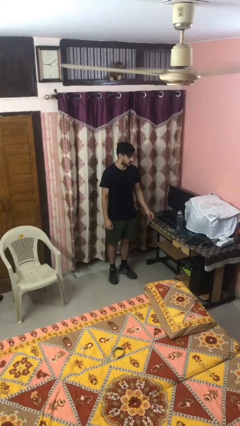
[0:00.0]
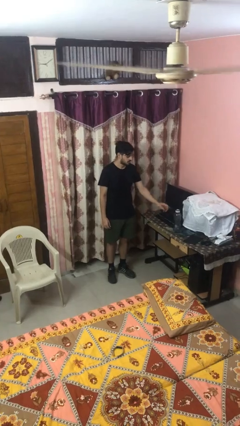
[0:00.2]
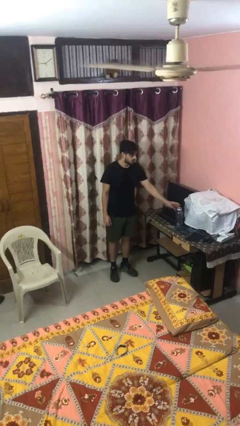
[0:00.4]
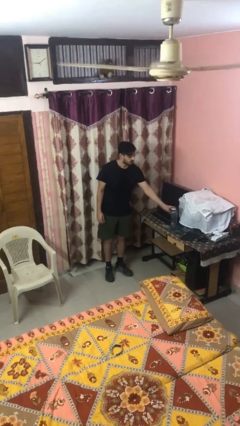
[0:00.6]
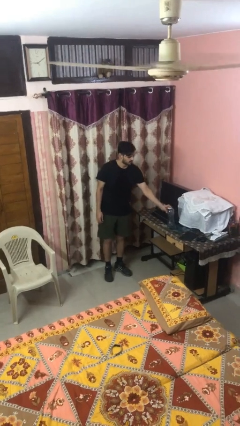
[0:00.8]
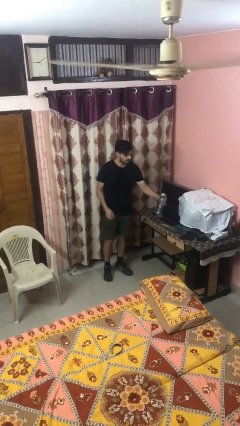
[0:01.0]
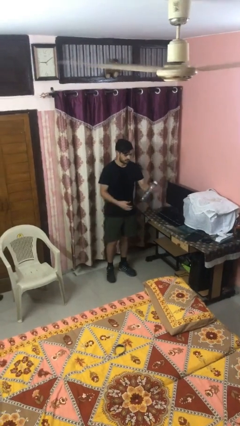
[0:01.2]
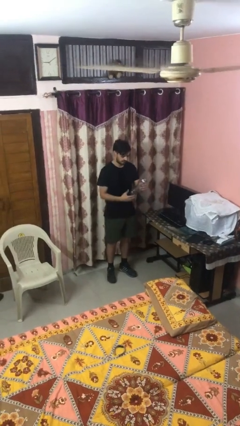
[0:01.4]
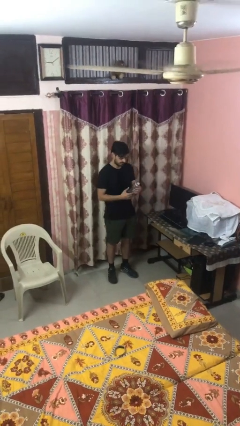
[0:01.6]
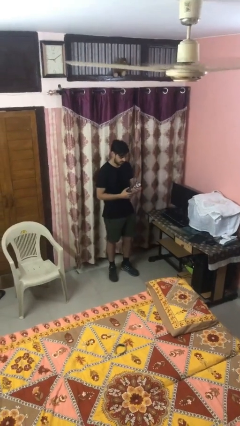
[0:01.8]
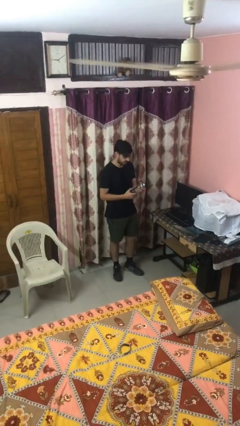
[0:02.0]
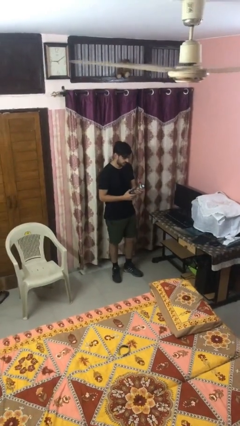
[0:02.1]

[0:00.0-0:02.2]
person picks up object from countertop

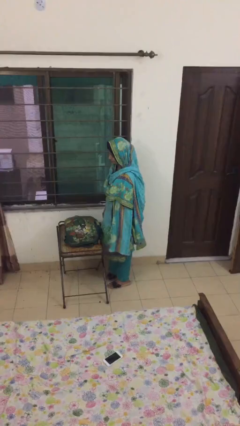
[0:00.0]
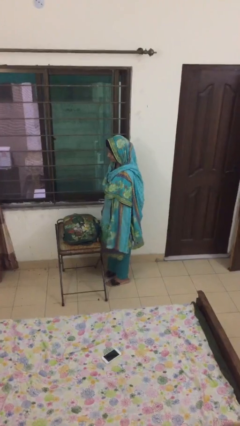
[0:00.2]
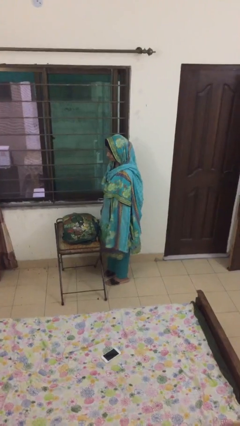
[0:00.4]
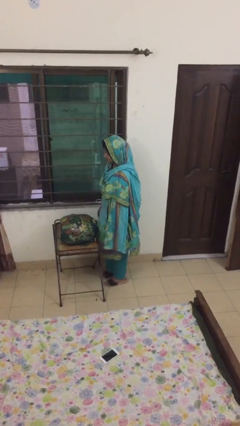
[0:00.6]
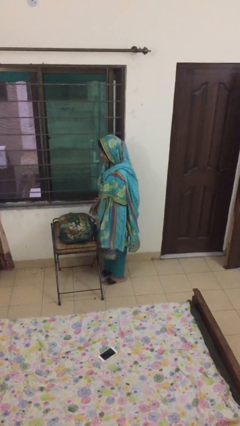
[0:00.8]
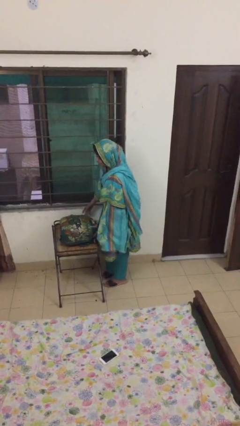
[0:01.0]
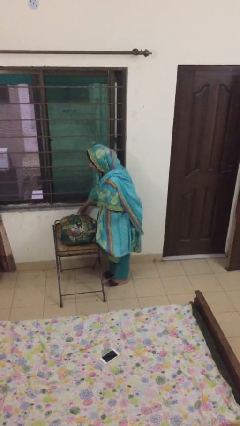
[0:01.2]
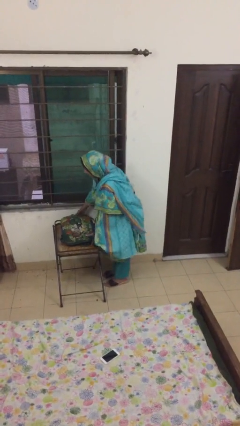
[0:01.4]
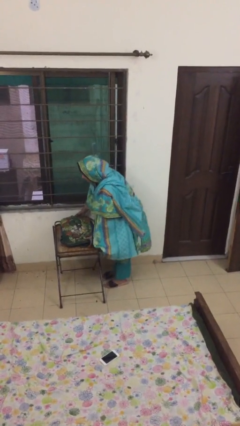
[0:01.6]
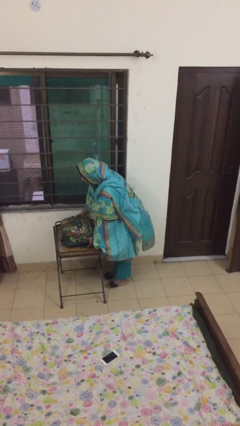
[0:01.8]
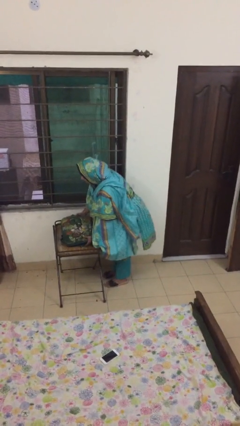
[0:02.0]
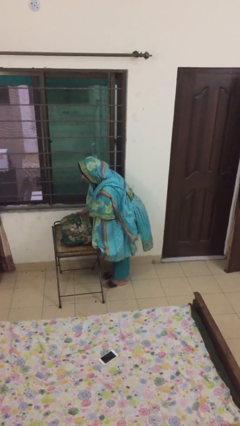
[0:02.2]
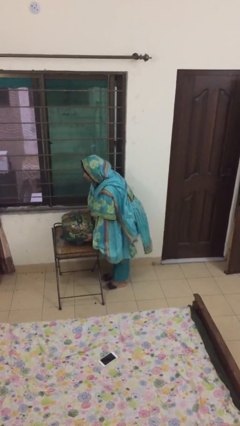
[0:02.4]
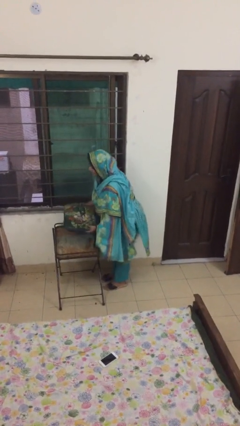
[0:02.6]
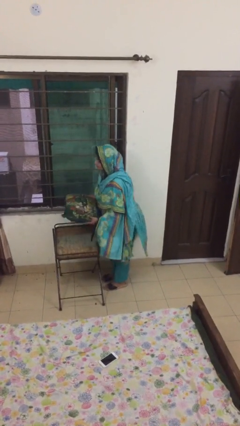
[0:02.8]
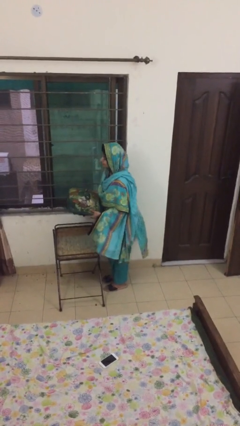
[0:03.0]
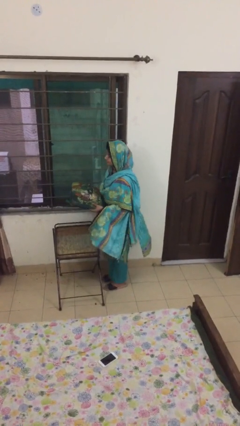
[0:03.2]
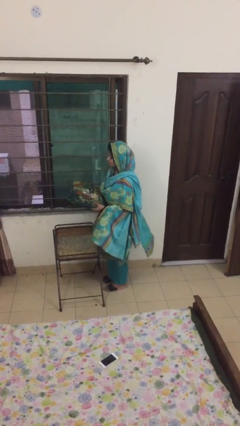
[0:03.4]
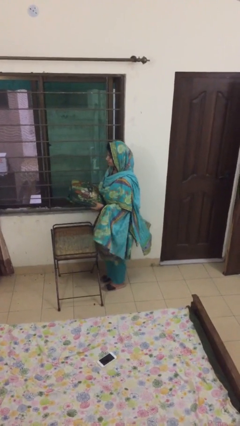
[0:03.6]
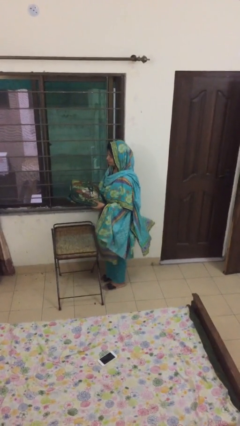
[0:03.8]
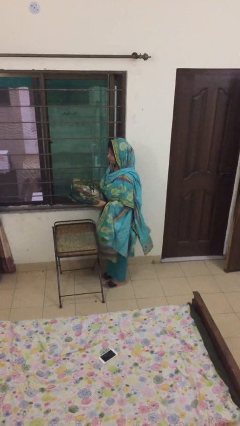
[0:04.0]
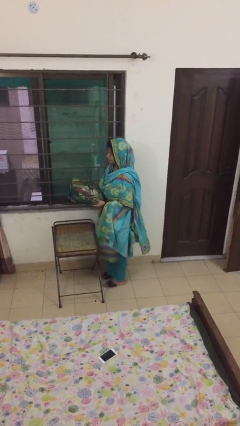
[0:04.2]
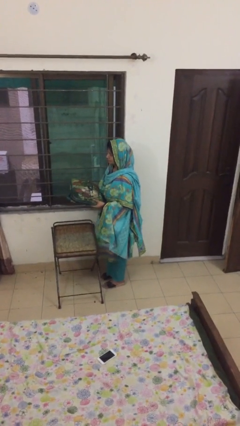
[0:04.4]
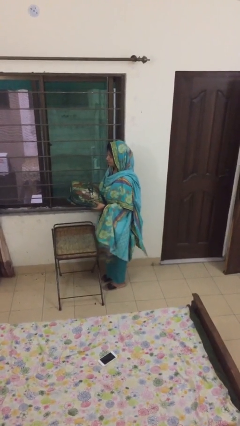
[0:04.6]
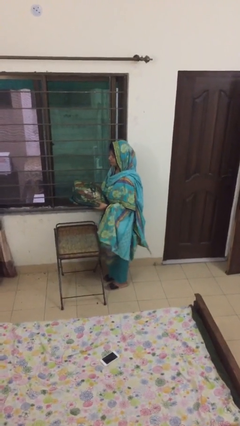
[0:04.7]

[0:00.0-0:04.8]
person picks up object from table

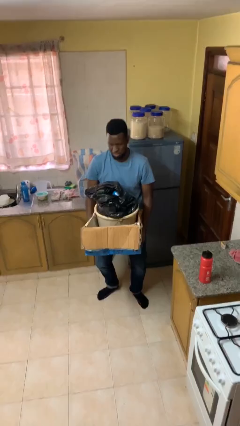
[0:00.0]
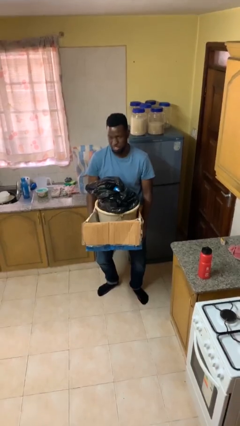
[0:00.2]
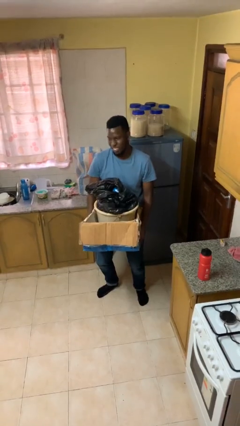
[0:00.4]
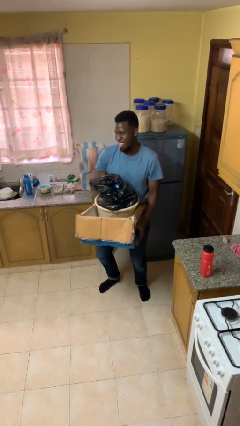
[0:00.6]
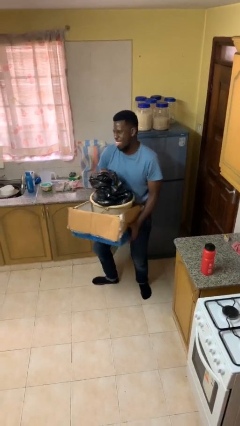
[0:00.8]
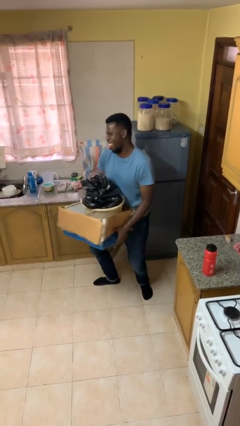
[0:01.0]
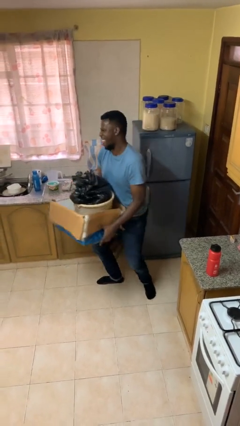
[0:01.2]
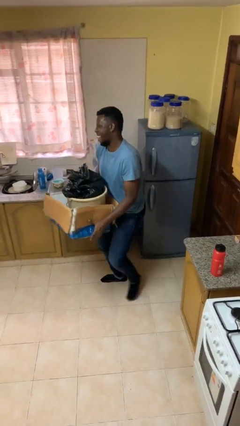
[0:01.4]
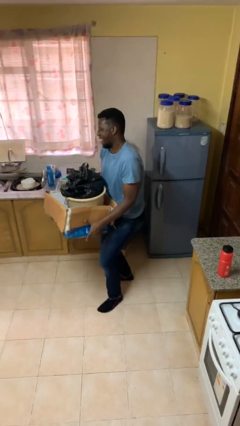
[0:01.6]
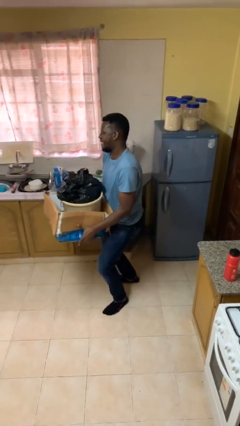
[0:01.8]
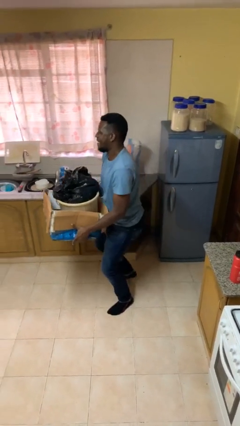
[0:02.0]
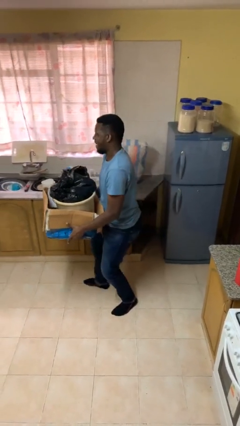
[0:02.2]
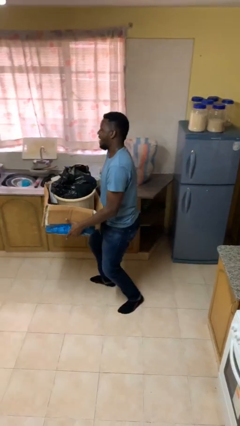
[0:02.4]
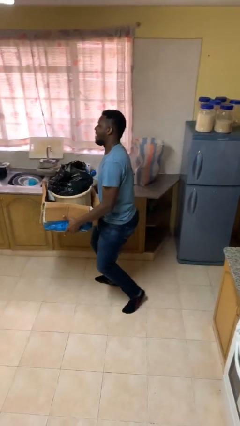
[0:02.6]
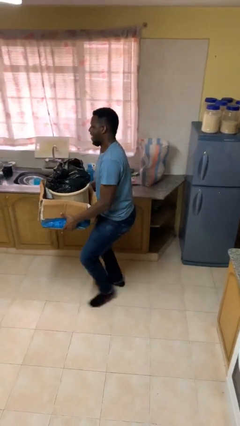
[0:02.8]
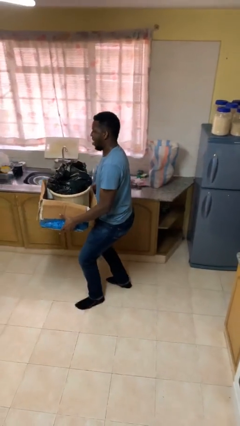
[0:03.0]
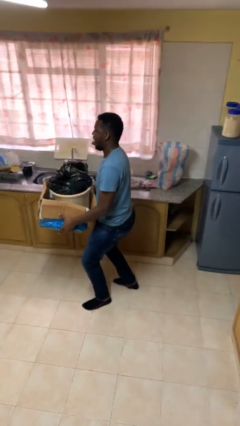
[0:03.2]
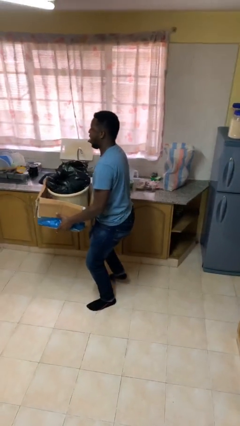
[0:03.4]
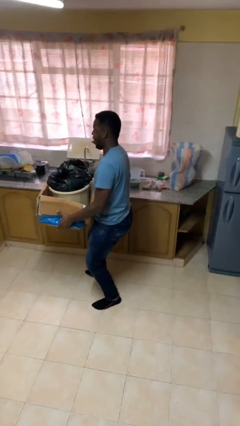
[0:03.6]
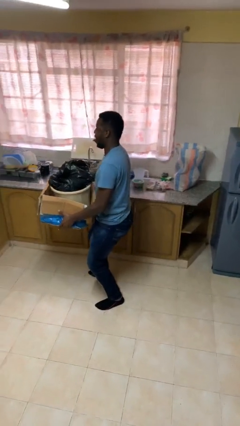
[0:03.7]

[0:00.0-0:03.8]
person carries heavy object

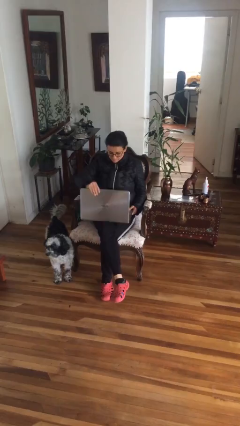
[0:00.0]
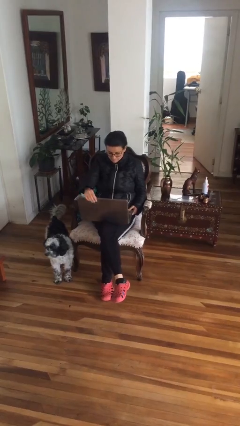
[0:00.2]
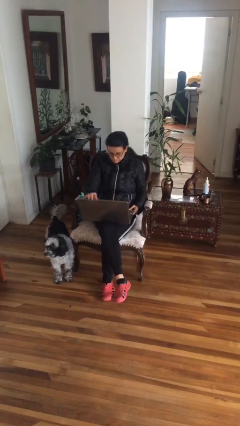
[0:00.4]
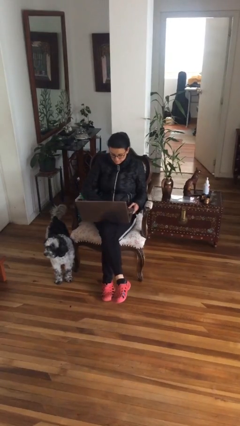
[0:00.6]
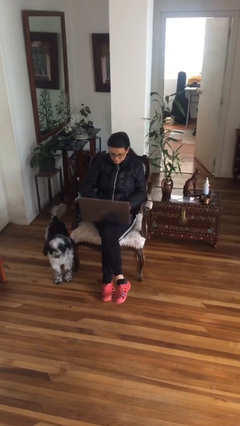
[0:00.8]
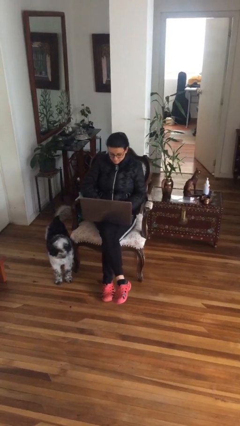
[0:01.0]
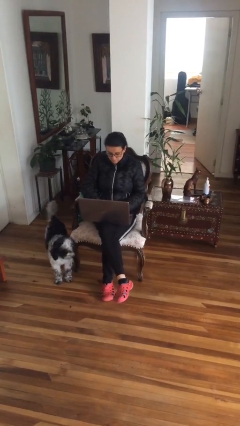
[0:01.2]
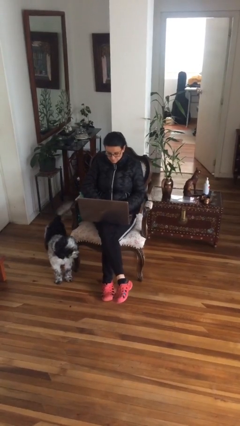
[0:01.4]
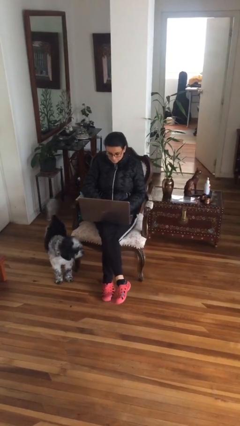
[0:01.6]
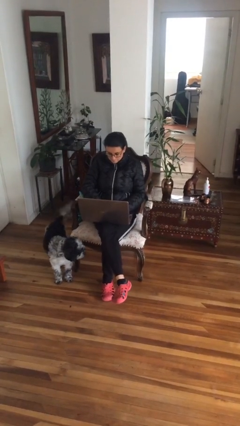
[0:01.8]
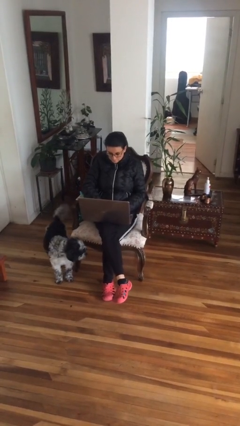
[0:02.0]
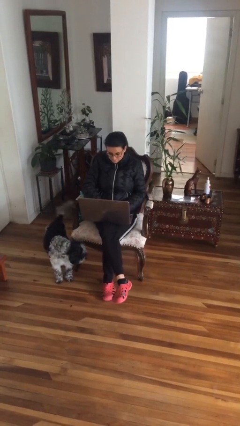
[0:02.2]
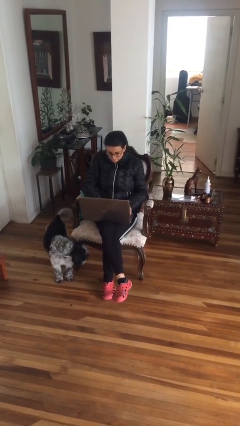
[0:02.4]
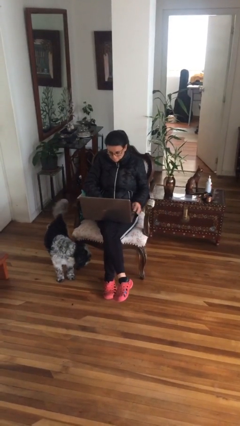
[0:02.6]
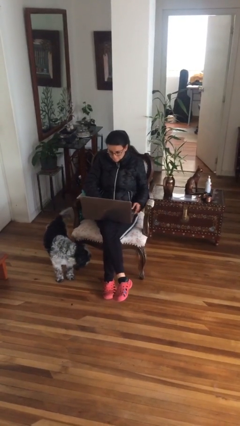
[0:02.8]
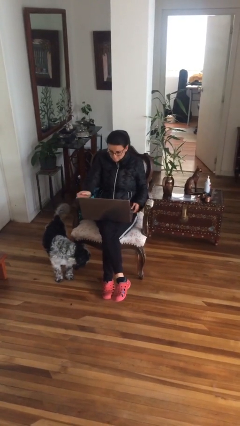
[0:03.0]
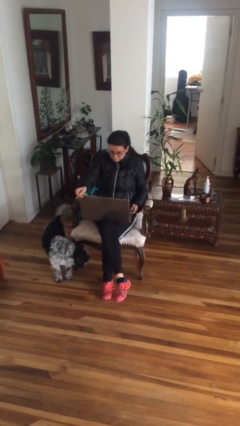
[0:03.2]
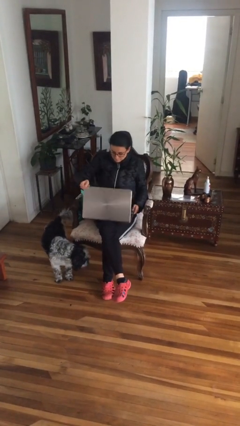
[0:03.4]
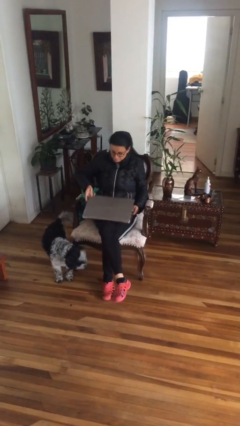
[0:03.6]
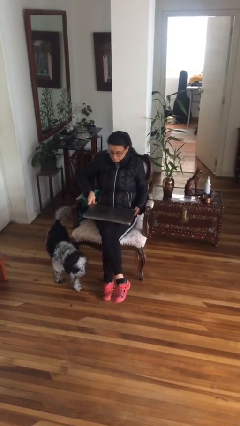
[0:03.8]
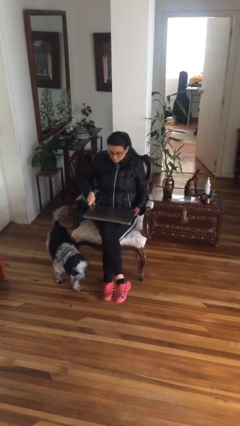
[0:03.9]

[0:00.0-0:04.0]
person interacts with laptop

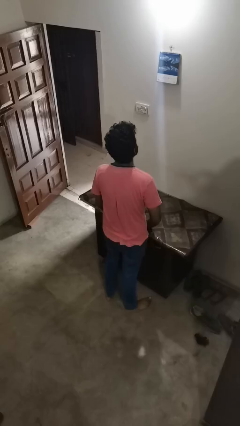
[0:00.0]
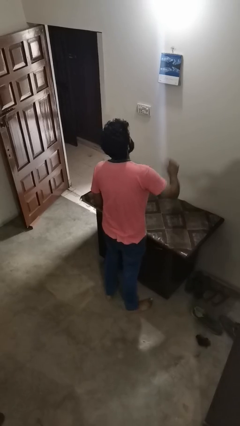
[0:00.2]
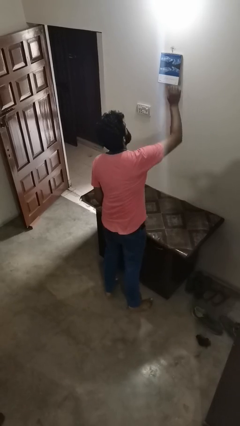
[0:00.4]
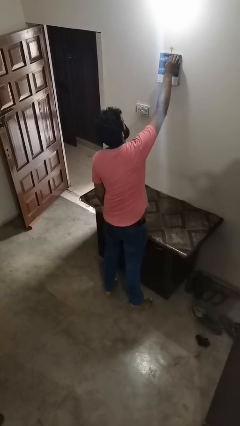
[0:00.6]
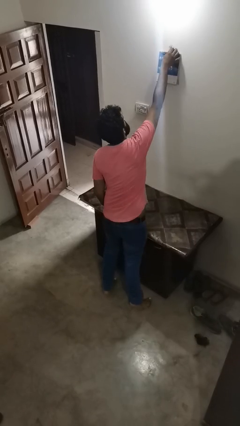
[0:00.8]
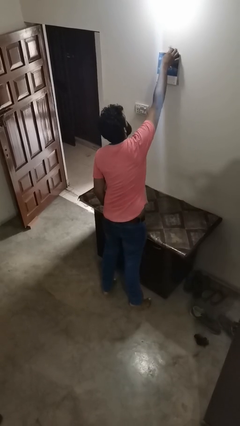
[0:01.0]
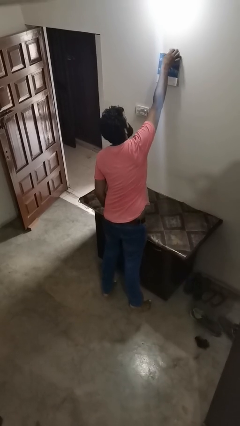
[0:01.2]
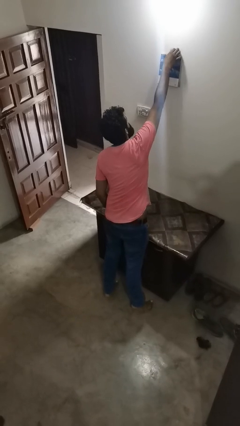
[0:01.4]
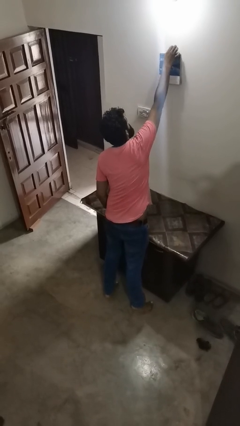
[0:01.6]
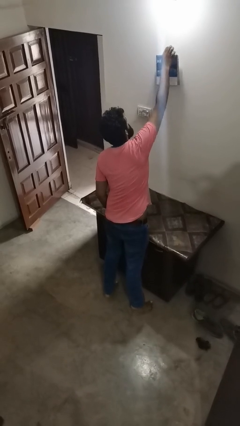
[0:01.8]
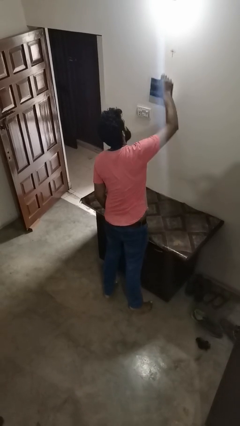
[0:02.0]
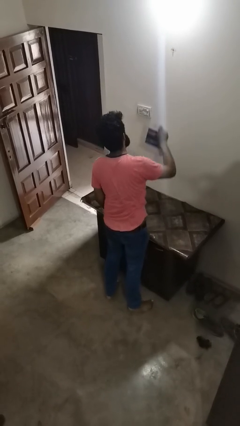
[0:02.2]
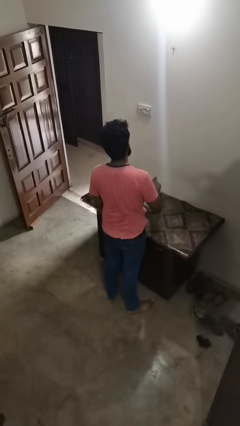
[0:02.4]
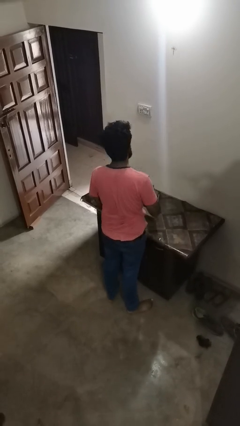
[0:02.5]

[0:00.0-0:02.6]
person takes down picture frame
